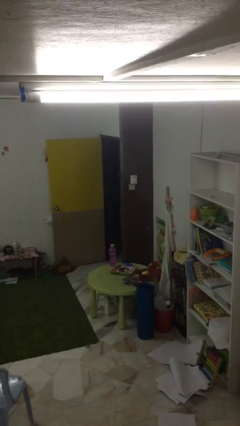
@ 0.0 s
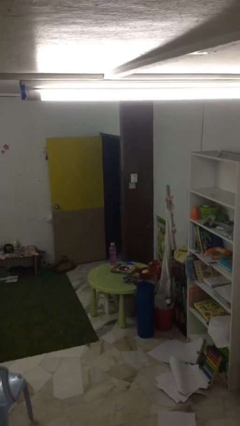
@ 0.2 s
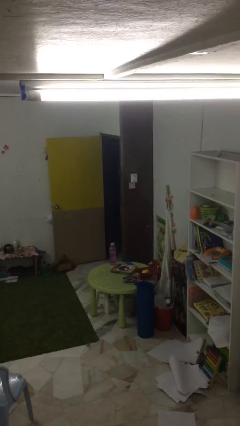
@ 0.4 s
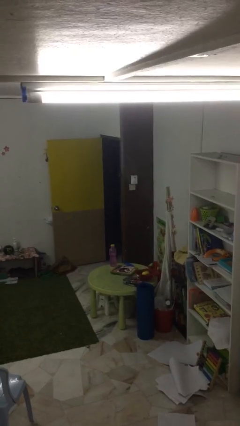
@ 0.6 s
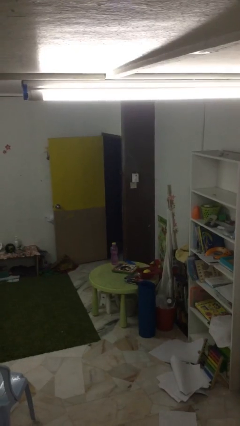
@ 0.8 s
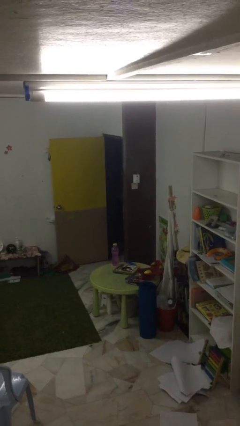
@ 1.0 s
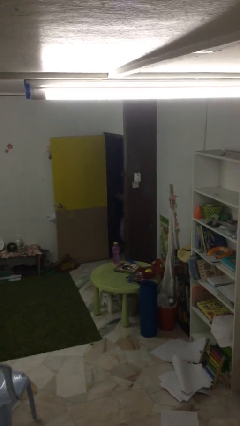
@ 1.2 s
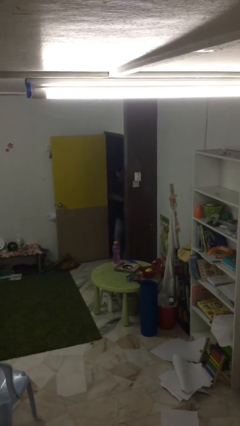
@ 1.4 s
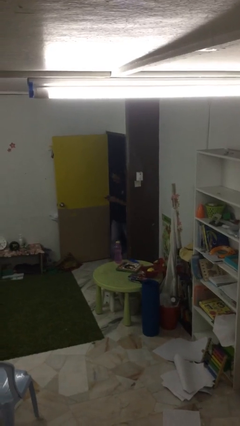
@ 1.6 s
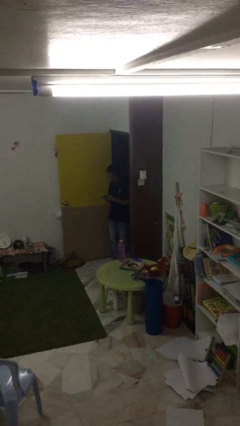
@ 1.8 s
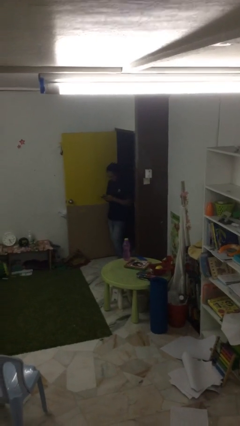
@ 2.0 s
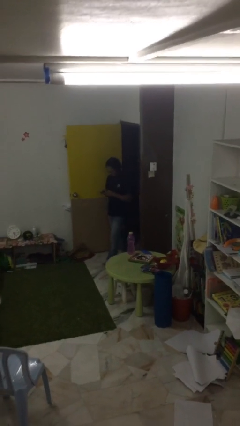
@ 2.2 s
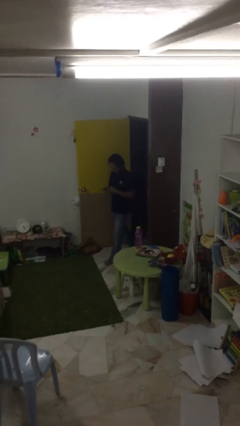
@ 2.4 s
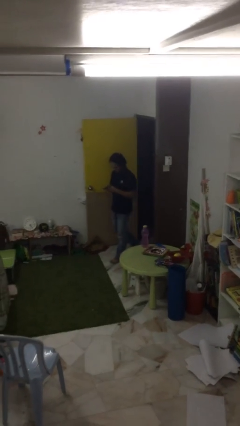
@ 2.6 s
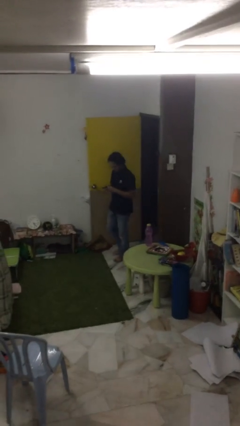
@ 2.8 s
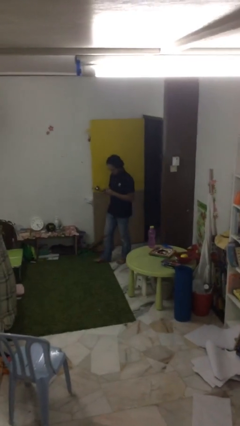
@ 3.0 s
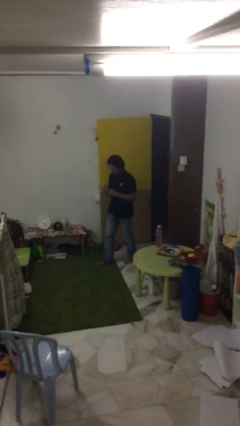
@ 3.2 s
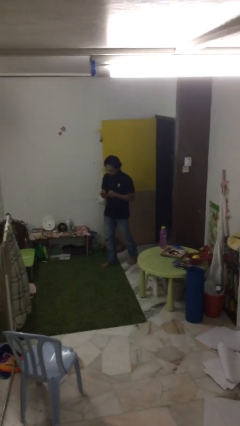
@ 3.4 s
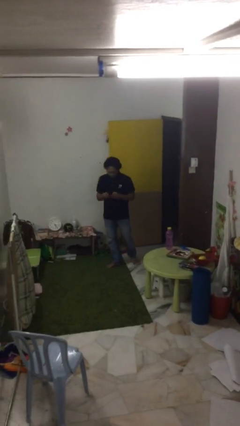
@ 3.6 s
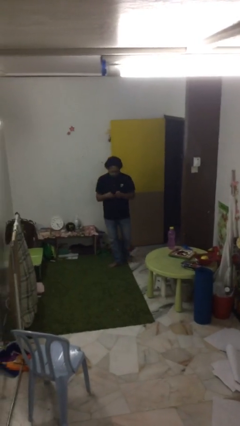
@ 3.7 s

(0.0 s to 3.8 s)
person enters scene through structure

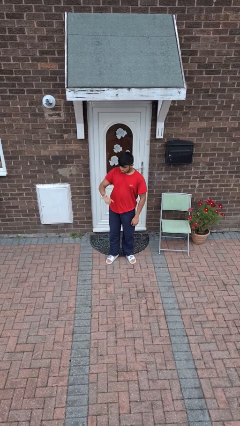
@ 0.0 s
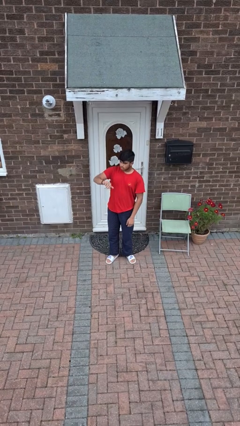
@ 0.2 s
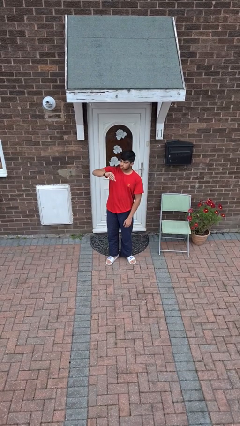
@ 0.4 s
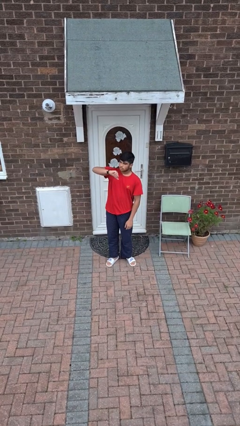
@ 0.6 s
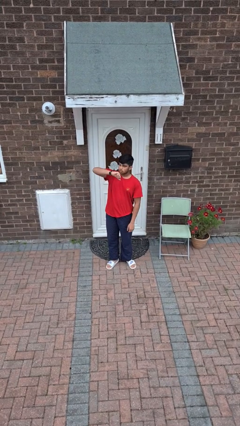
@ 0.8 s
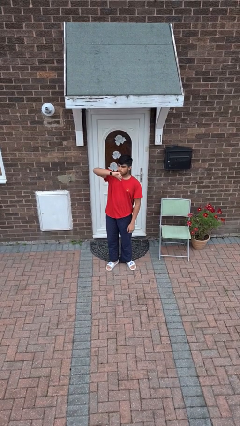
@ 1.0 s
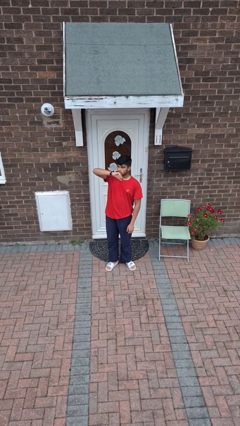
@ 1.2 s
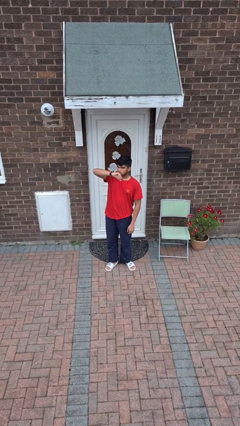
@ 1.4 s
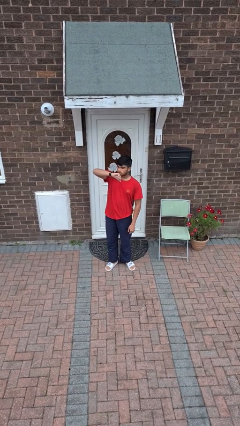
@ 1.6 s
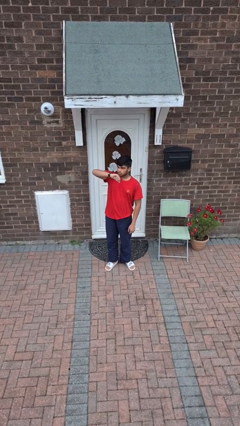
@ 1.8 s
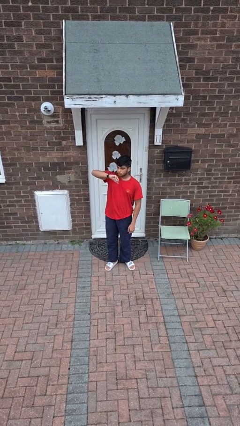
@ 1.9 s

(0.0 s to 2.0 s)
person looks at wristwatch

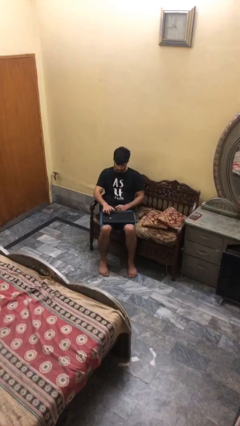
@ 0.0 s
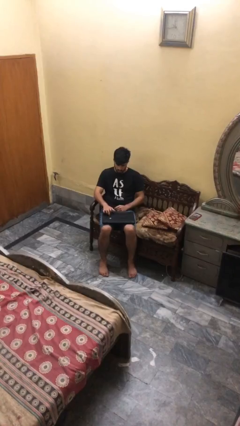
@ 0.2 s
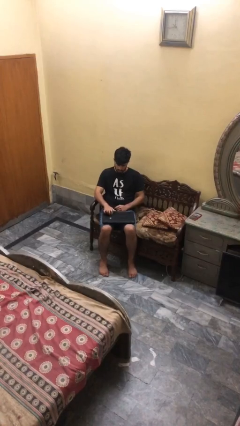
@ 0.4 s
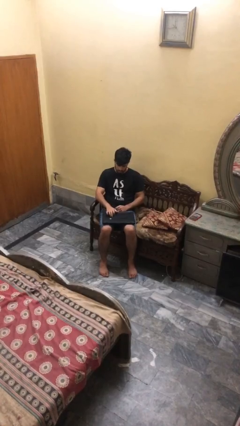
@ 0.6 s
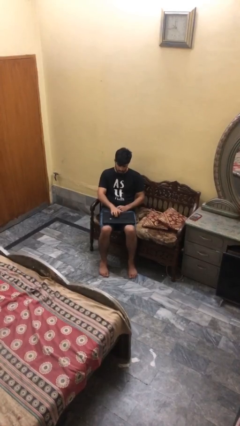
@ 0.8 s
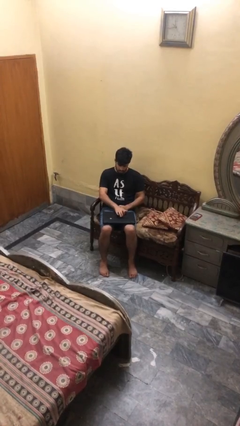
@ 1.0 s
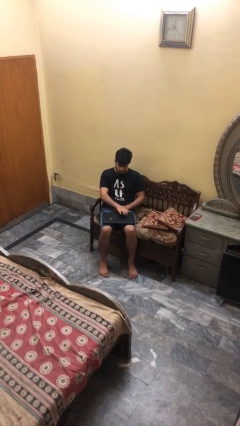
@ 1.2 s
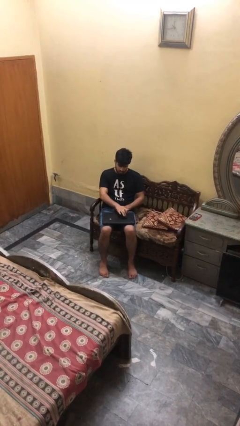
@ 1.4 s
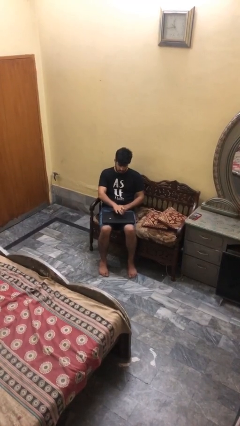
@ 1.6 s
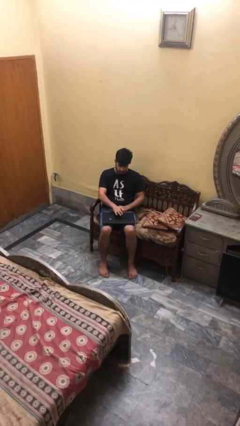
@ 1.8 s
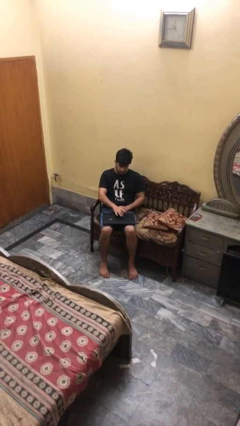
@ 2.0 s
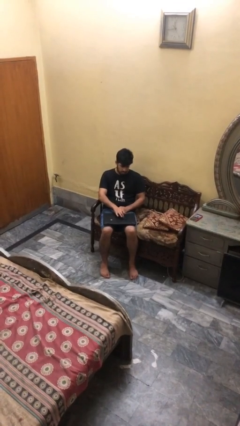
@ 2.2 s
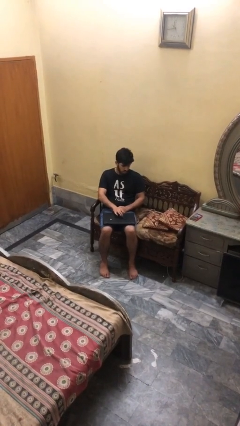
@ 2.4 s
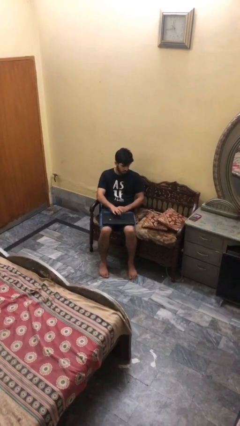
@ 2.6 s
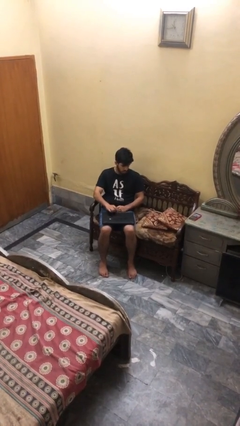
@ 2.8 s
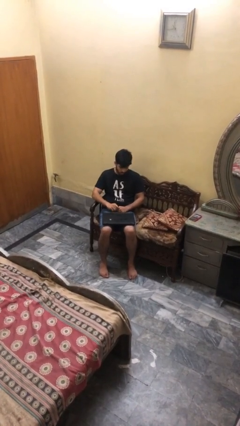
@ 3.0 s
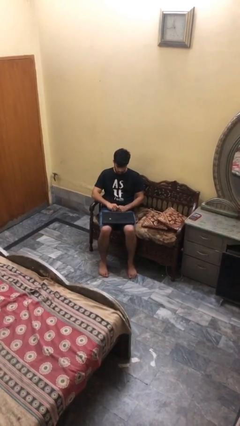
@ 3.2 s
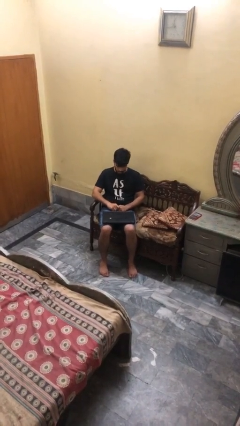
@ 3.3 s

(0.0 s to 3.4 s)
person taps object with finger

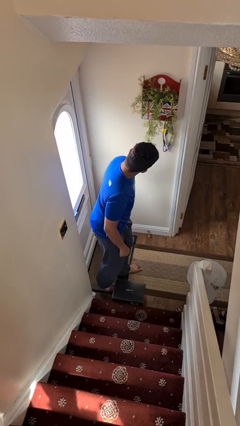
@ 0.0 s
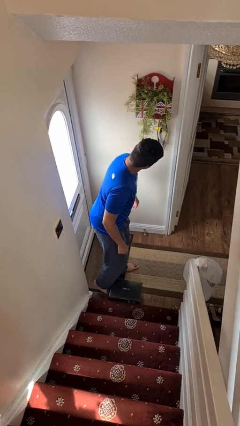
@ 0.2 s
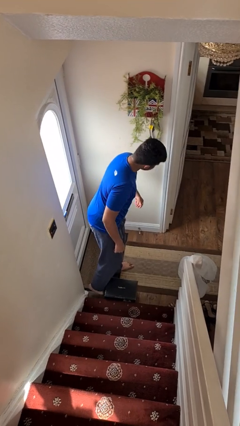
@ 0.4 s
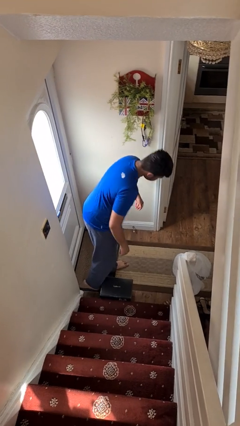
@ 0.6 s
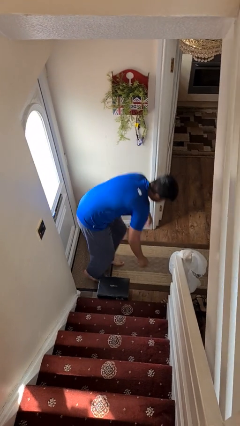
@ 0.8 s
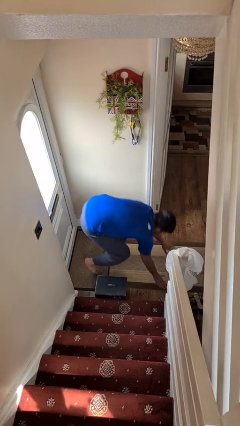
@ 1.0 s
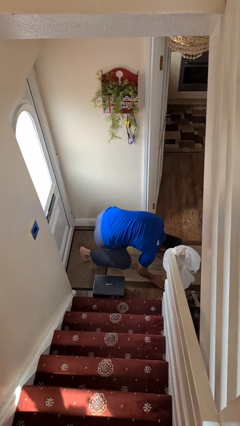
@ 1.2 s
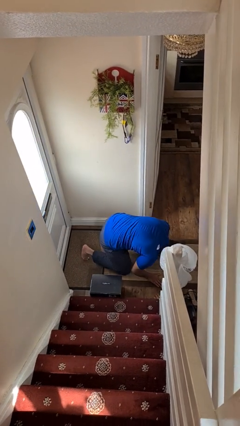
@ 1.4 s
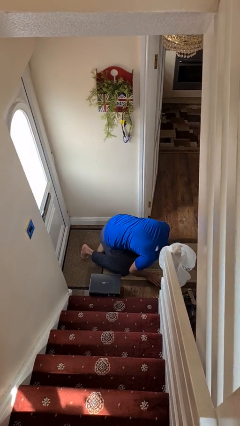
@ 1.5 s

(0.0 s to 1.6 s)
person trips on object on floor

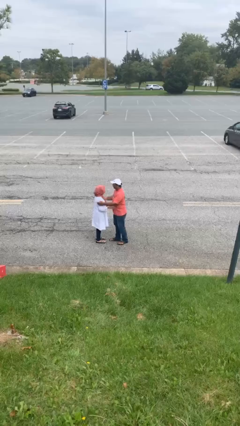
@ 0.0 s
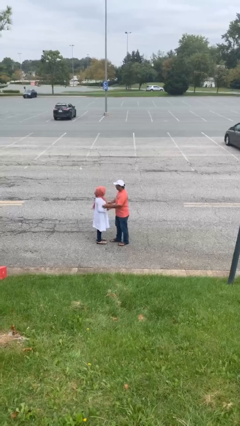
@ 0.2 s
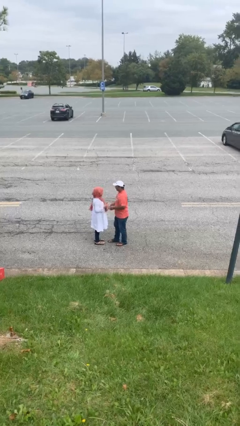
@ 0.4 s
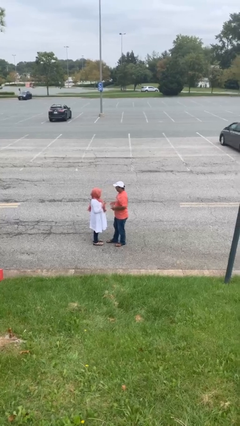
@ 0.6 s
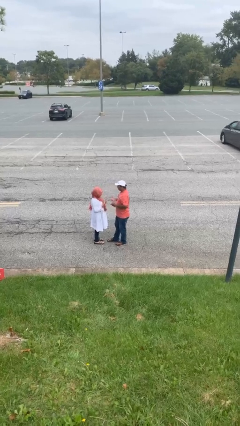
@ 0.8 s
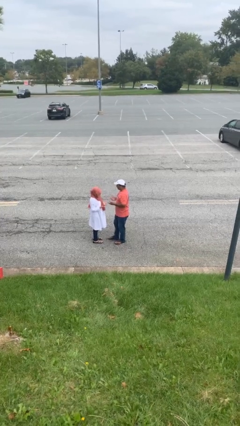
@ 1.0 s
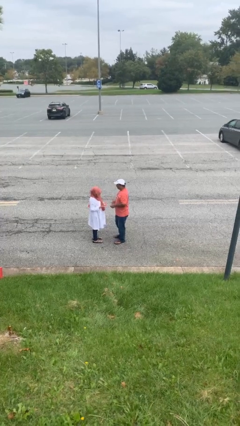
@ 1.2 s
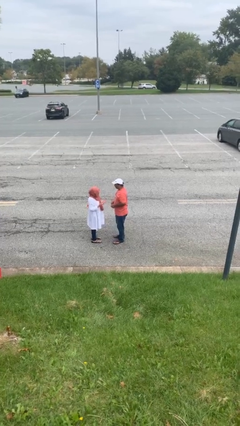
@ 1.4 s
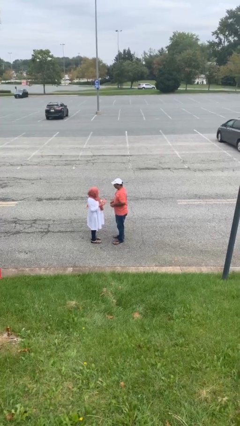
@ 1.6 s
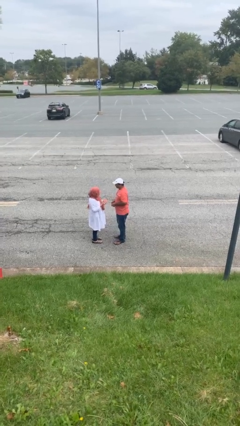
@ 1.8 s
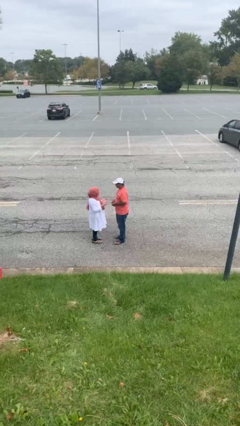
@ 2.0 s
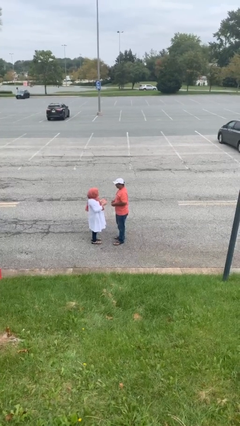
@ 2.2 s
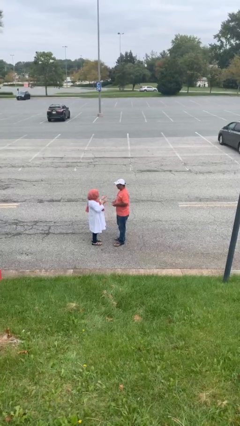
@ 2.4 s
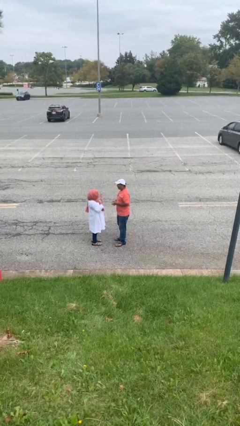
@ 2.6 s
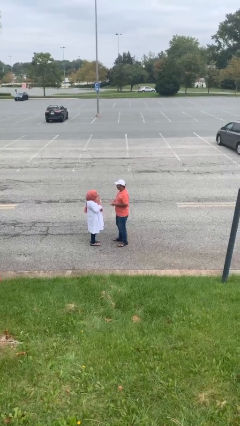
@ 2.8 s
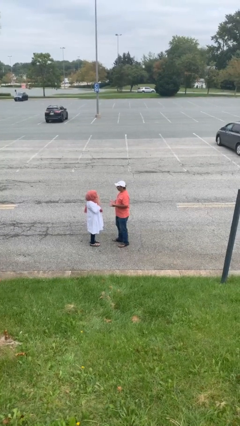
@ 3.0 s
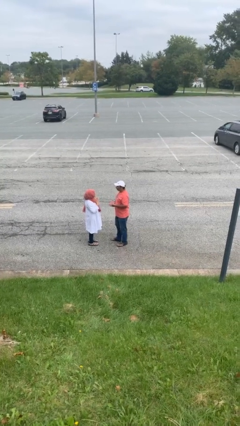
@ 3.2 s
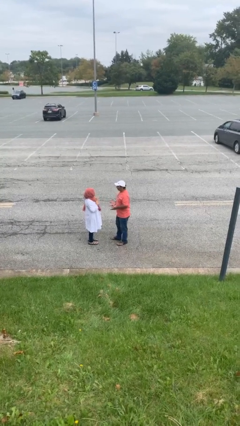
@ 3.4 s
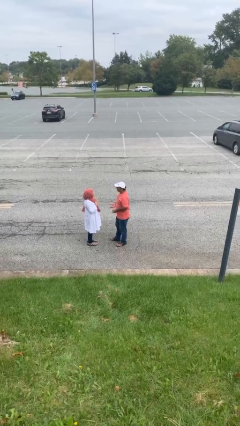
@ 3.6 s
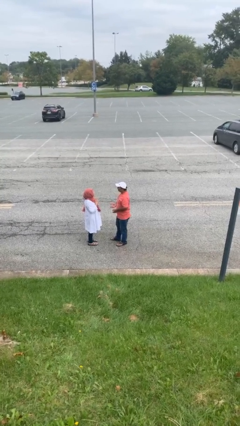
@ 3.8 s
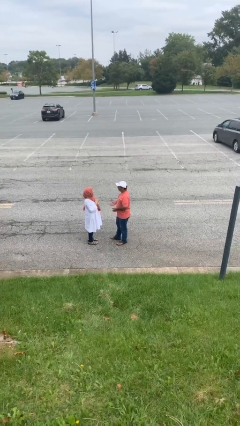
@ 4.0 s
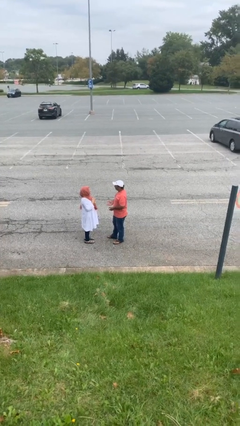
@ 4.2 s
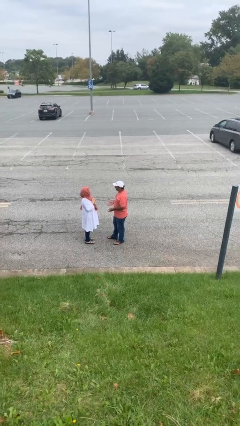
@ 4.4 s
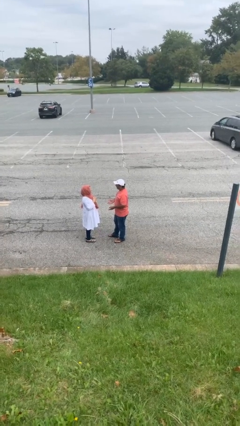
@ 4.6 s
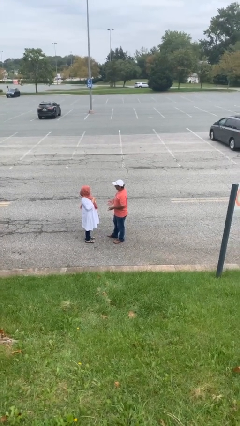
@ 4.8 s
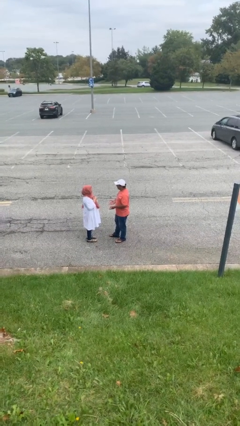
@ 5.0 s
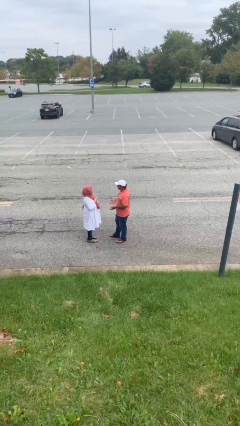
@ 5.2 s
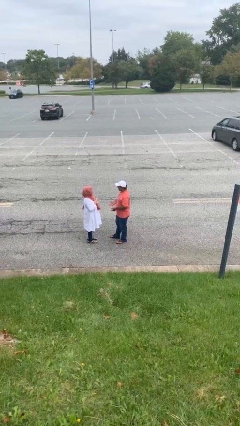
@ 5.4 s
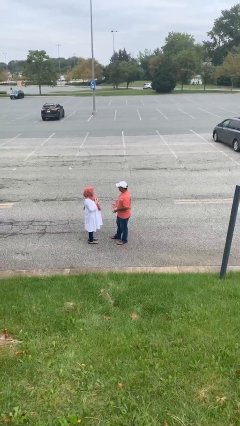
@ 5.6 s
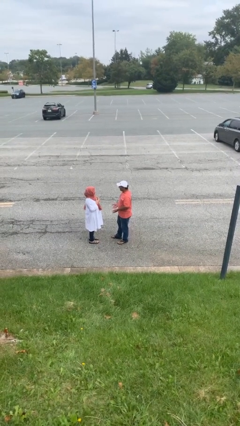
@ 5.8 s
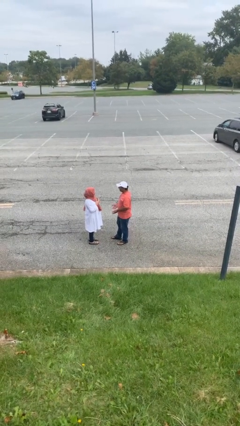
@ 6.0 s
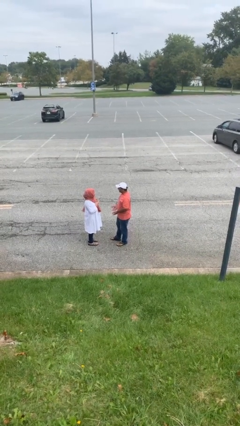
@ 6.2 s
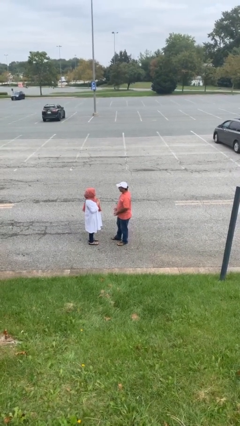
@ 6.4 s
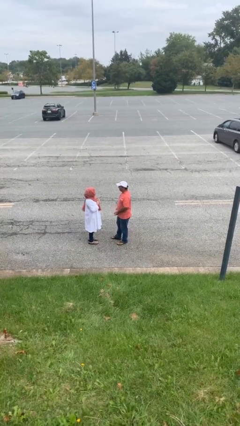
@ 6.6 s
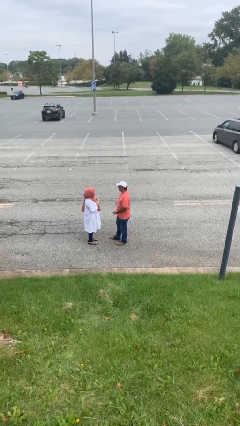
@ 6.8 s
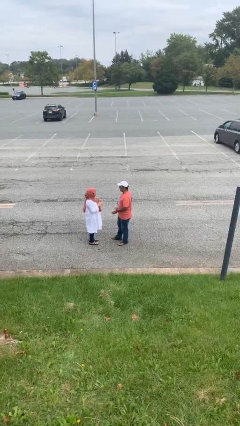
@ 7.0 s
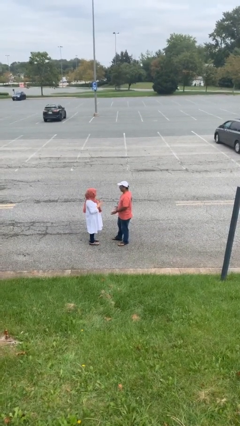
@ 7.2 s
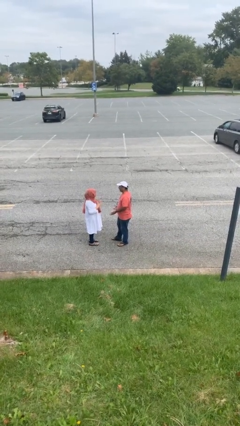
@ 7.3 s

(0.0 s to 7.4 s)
person talks to person
